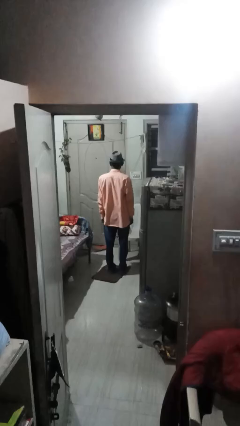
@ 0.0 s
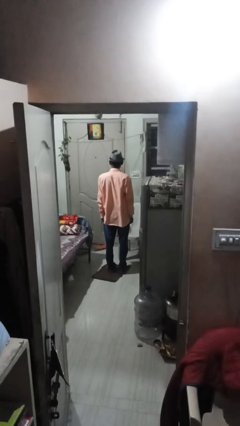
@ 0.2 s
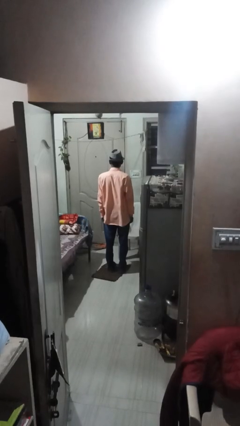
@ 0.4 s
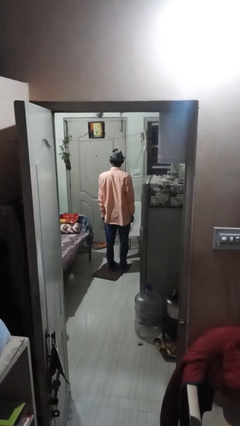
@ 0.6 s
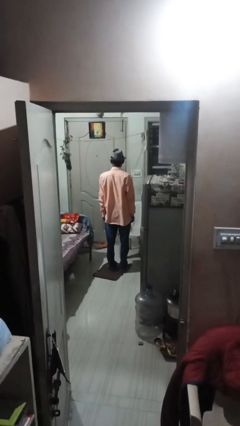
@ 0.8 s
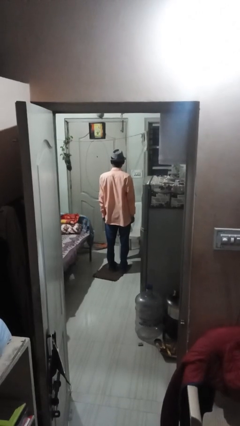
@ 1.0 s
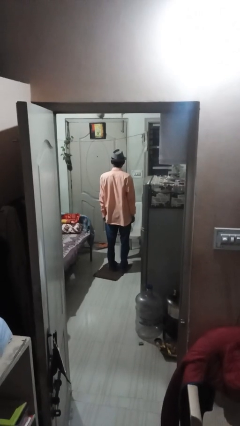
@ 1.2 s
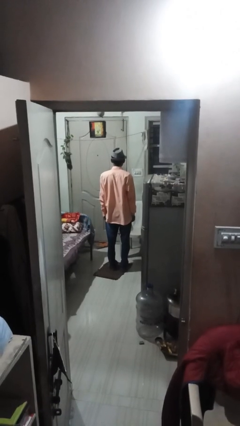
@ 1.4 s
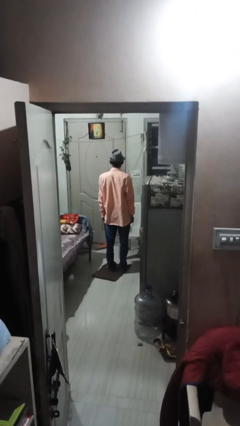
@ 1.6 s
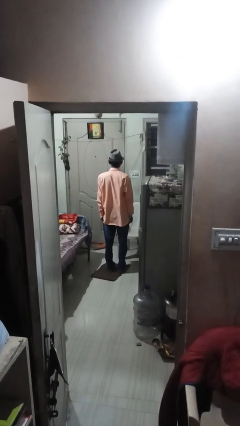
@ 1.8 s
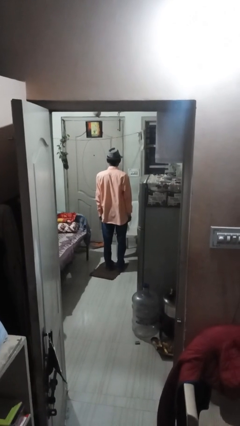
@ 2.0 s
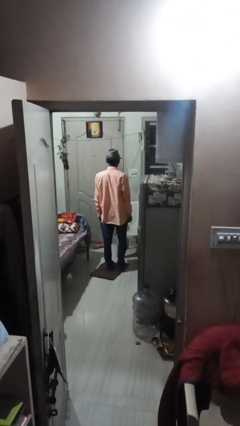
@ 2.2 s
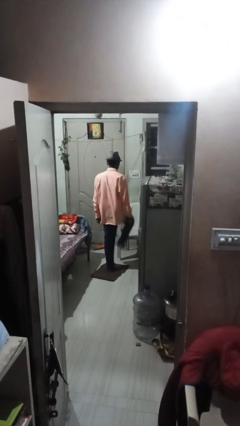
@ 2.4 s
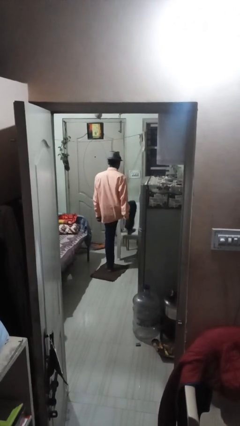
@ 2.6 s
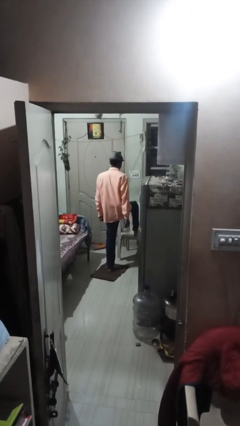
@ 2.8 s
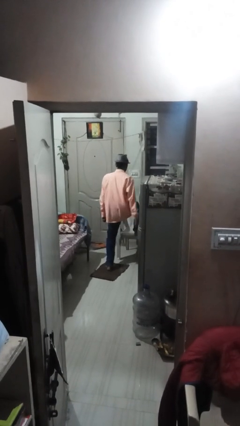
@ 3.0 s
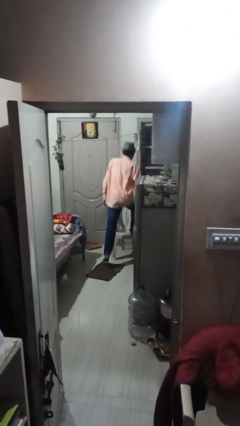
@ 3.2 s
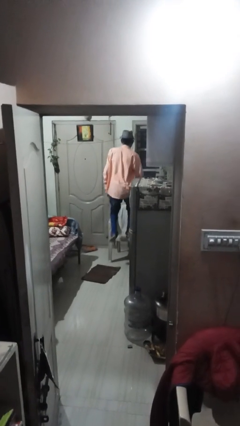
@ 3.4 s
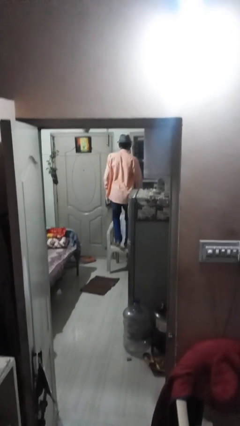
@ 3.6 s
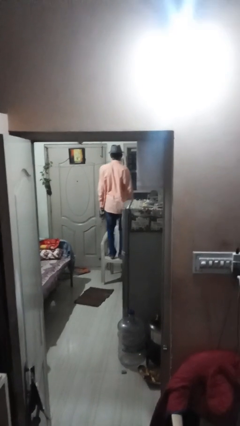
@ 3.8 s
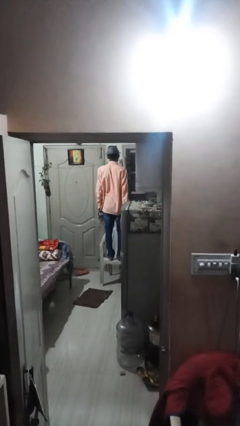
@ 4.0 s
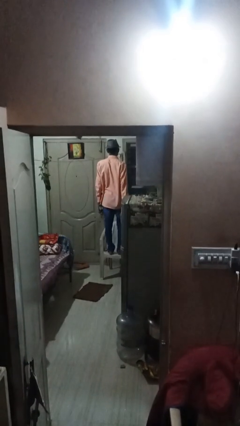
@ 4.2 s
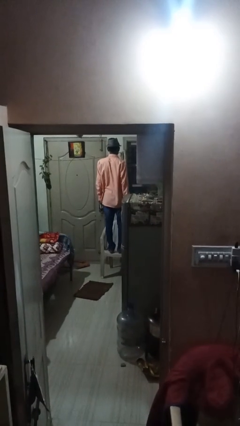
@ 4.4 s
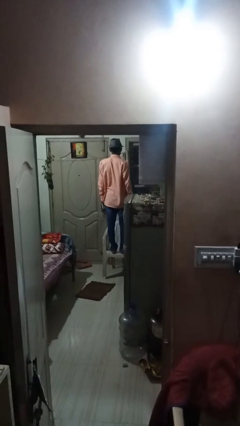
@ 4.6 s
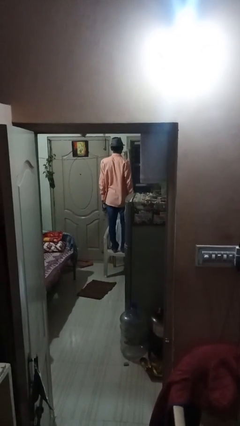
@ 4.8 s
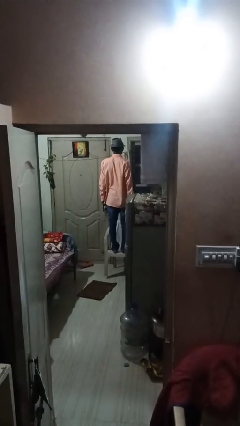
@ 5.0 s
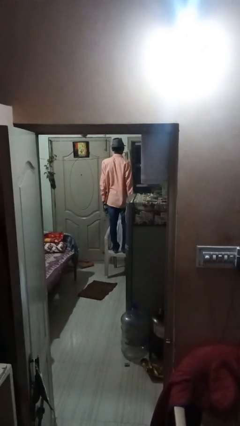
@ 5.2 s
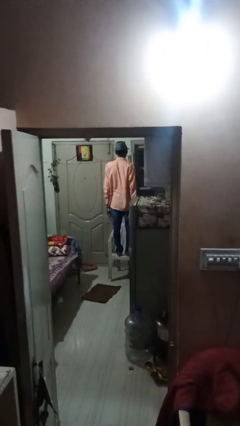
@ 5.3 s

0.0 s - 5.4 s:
person climbs on chair

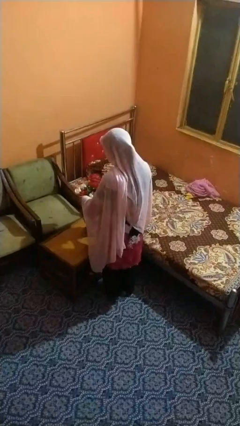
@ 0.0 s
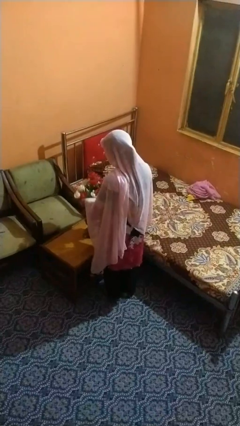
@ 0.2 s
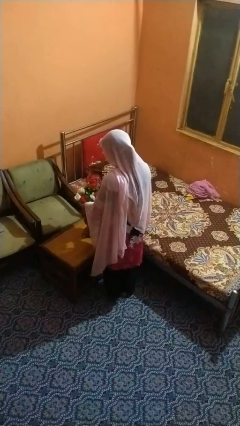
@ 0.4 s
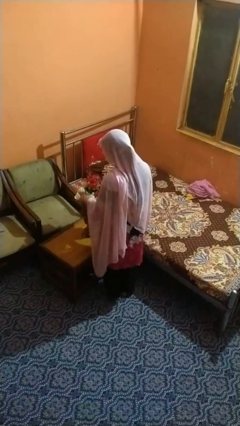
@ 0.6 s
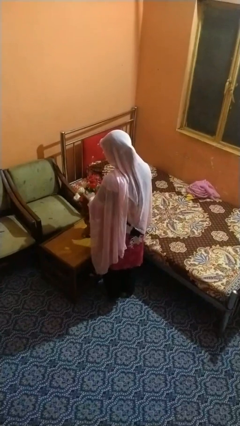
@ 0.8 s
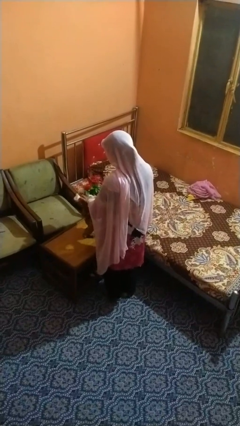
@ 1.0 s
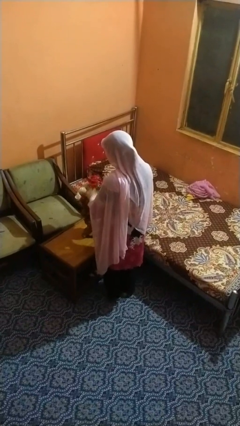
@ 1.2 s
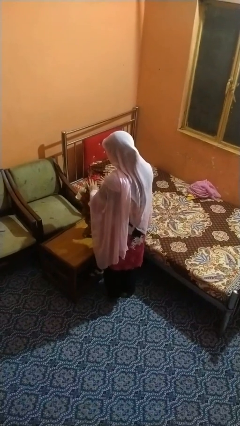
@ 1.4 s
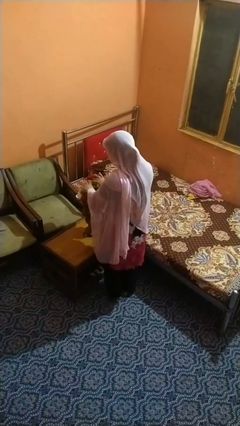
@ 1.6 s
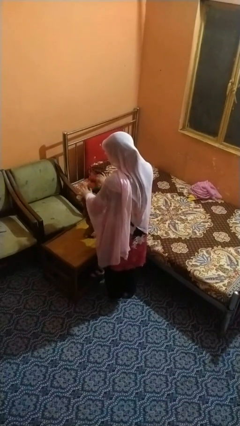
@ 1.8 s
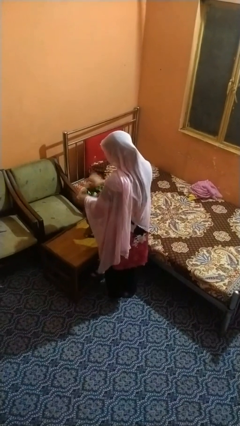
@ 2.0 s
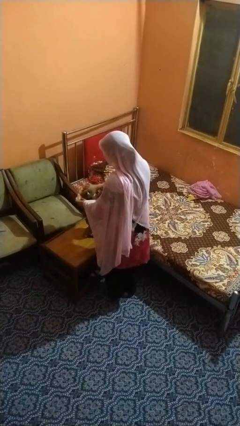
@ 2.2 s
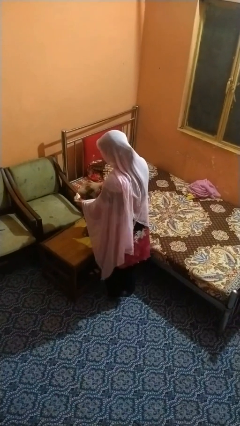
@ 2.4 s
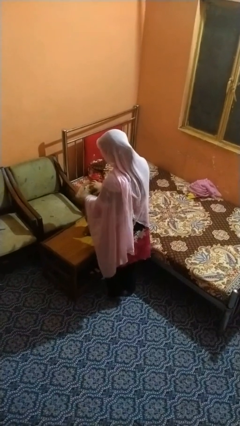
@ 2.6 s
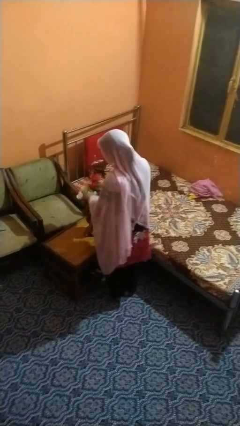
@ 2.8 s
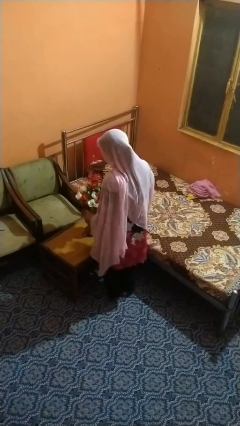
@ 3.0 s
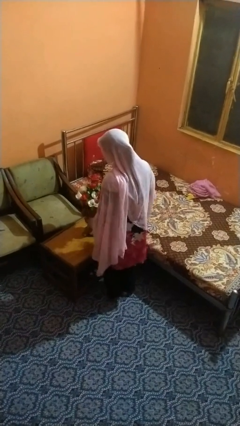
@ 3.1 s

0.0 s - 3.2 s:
person arranges flowers in vase

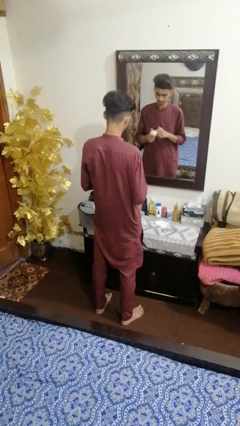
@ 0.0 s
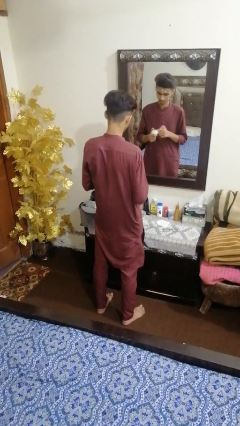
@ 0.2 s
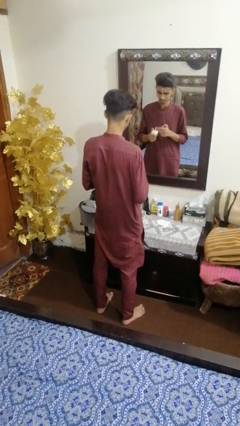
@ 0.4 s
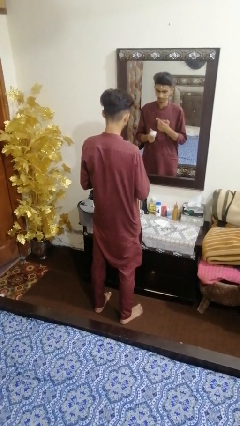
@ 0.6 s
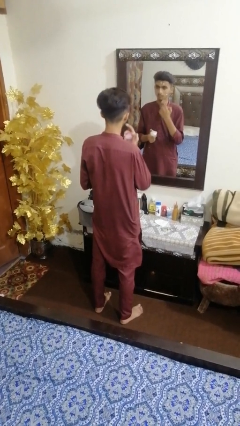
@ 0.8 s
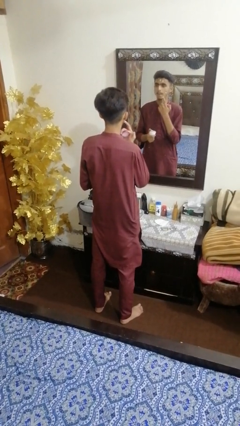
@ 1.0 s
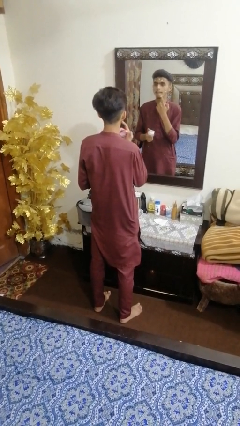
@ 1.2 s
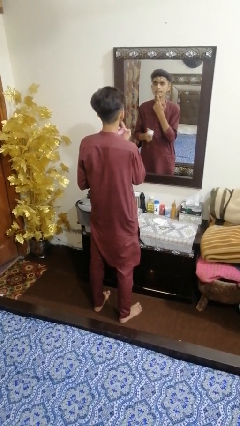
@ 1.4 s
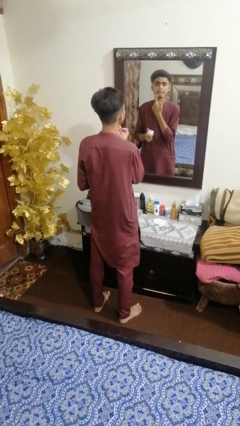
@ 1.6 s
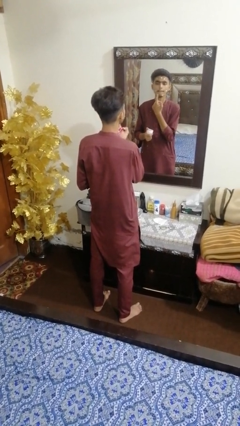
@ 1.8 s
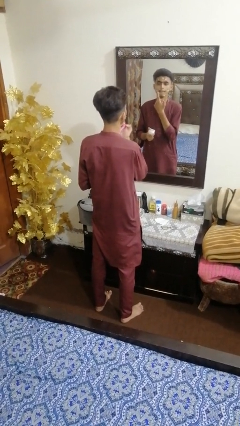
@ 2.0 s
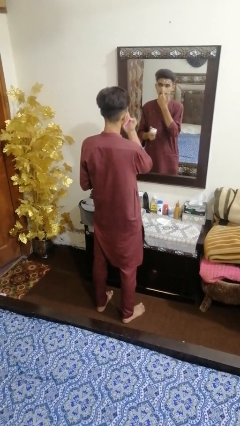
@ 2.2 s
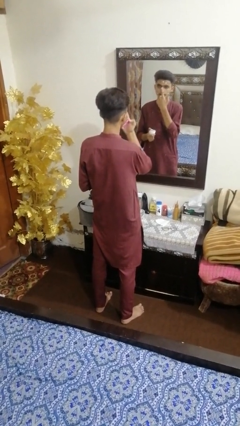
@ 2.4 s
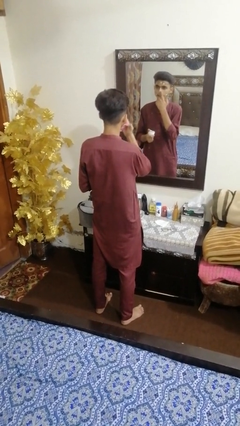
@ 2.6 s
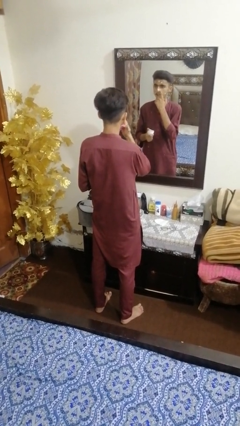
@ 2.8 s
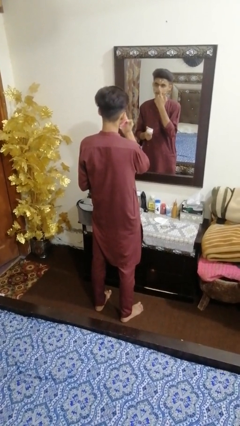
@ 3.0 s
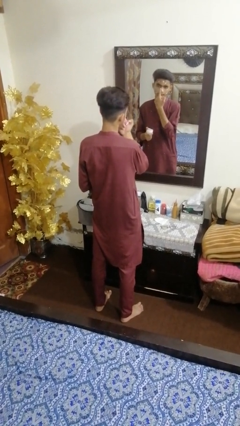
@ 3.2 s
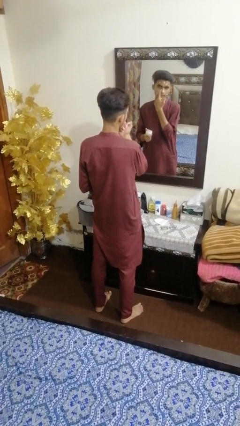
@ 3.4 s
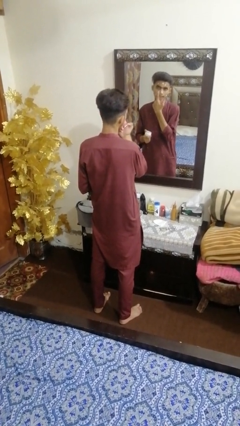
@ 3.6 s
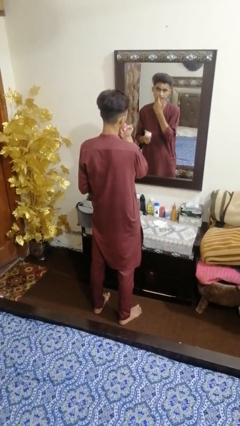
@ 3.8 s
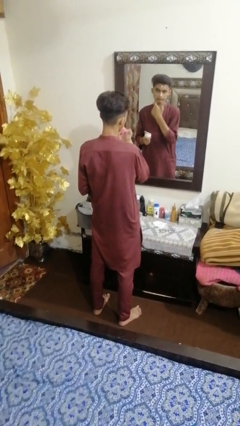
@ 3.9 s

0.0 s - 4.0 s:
person applies foundation makeup

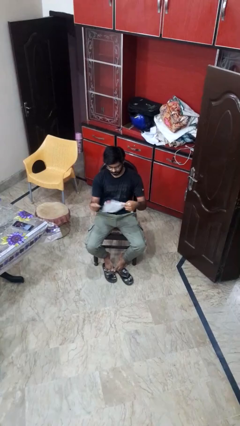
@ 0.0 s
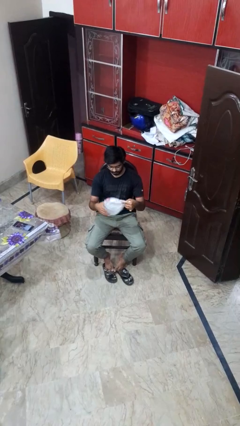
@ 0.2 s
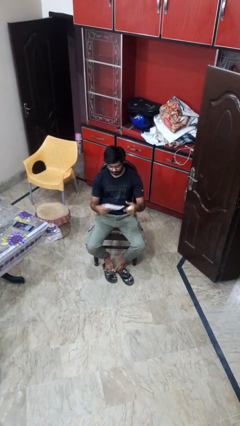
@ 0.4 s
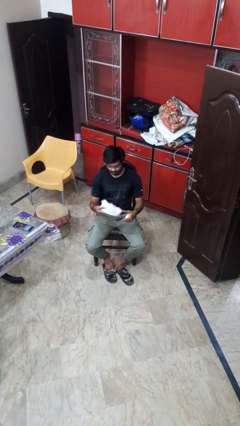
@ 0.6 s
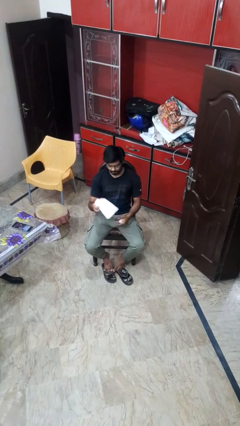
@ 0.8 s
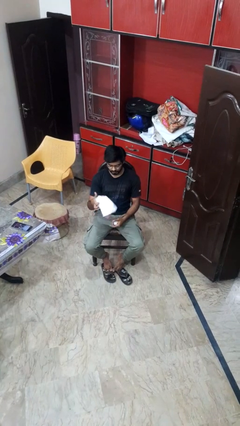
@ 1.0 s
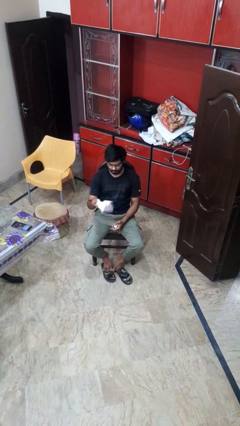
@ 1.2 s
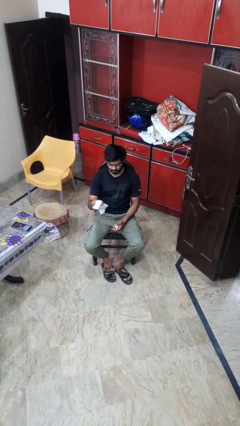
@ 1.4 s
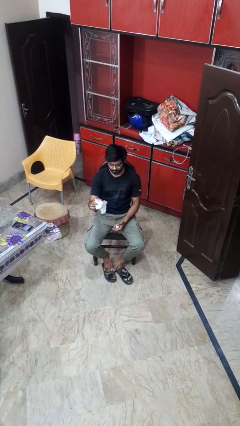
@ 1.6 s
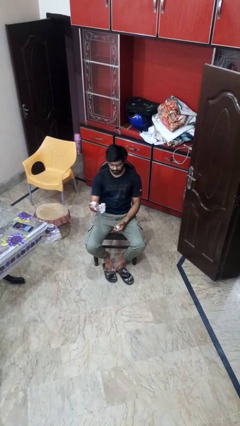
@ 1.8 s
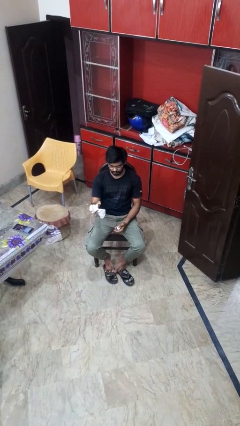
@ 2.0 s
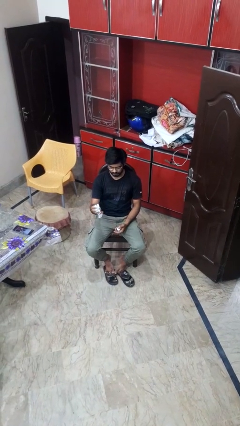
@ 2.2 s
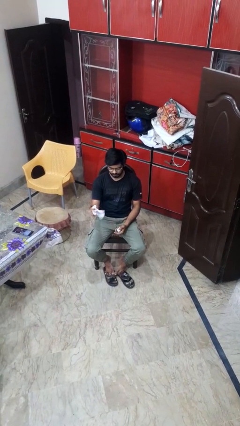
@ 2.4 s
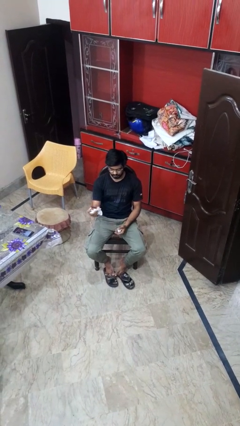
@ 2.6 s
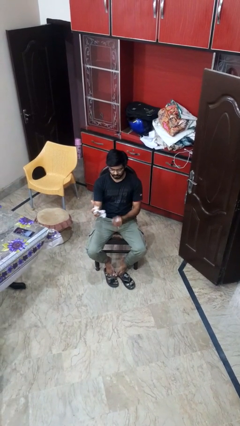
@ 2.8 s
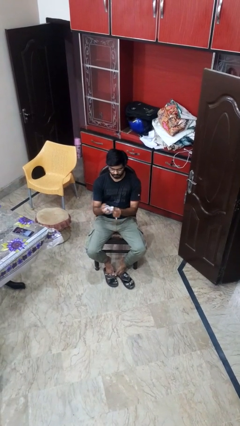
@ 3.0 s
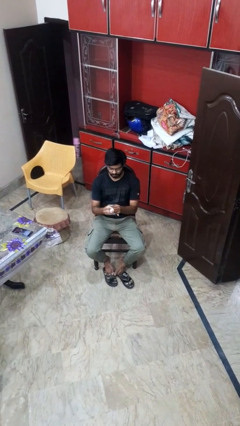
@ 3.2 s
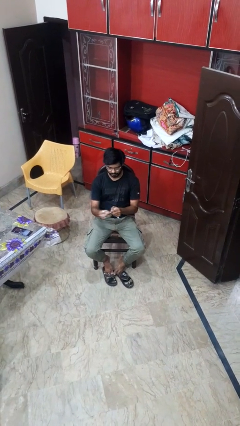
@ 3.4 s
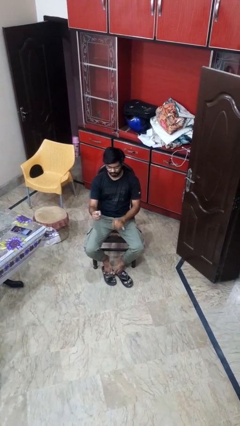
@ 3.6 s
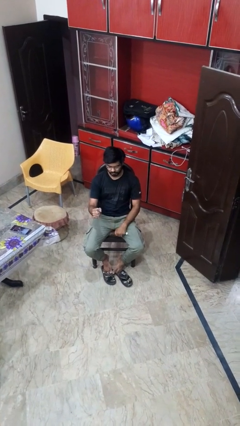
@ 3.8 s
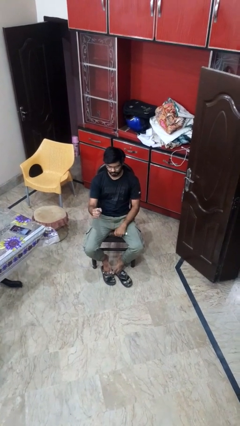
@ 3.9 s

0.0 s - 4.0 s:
person crumples paper

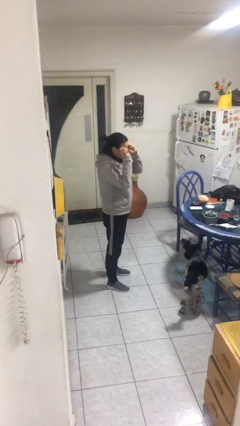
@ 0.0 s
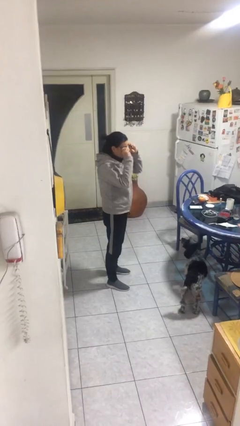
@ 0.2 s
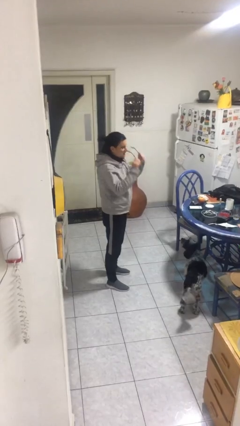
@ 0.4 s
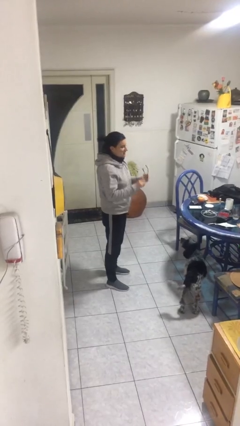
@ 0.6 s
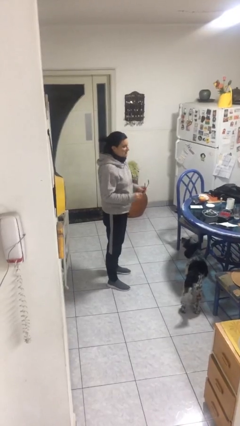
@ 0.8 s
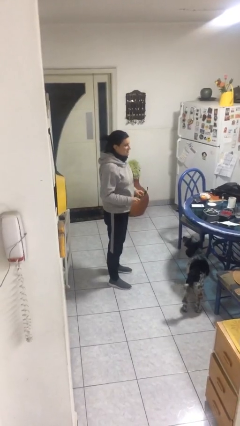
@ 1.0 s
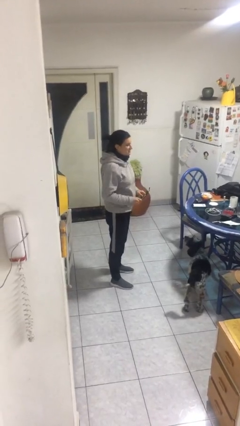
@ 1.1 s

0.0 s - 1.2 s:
person takes off glasses
